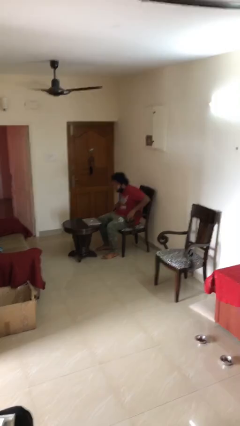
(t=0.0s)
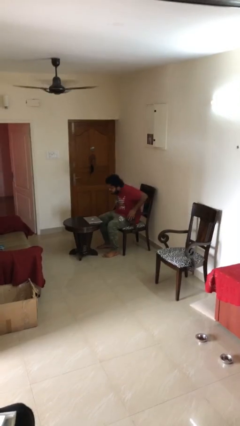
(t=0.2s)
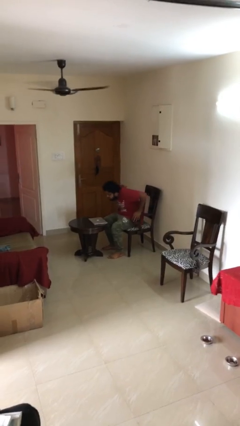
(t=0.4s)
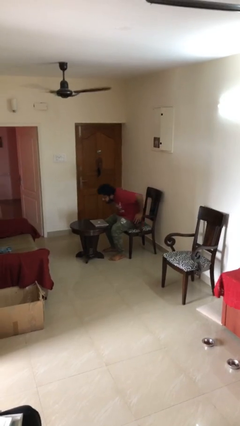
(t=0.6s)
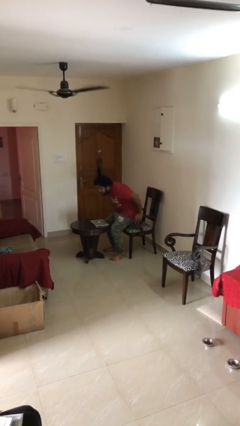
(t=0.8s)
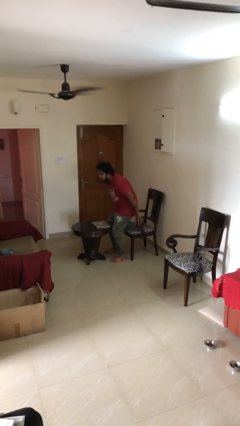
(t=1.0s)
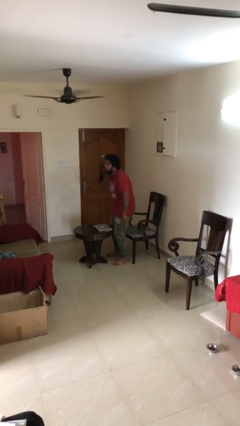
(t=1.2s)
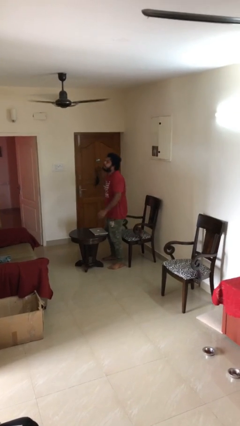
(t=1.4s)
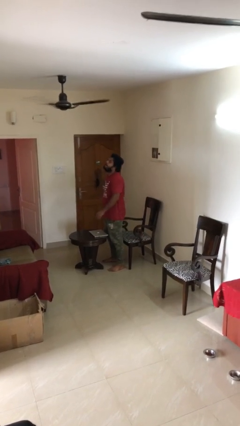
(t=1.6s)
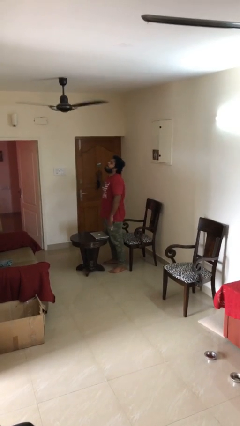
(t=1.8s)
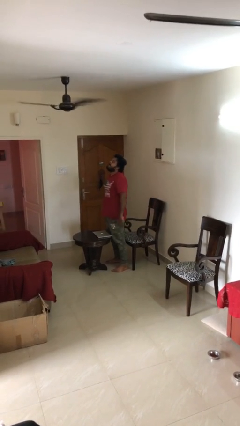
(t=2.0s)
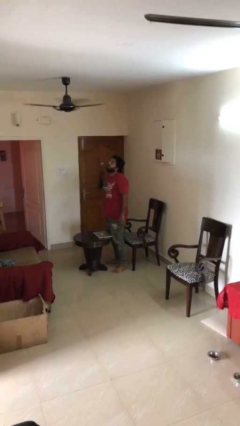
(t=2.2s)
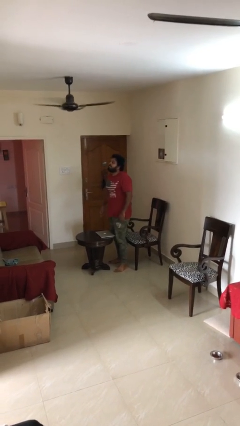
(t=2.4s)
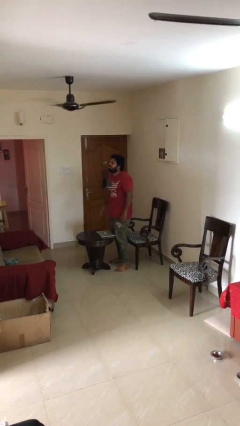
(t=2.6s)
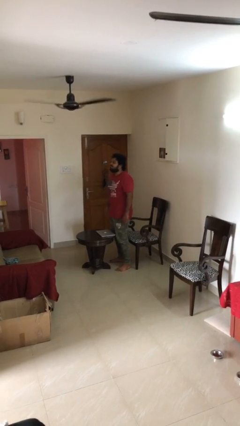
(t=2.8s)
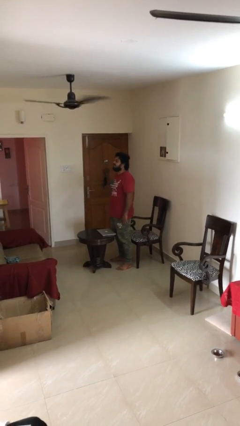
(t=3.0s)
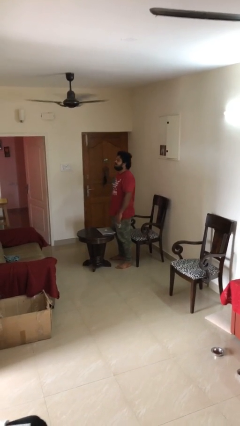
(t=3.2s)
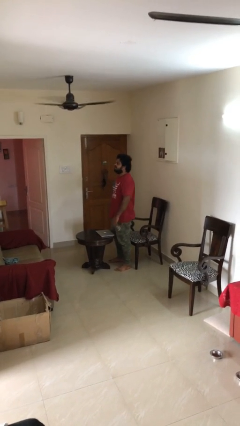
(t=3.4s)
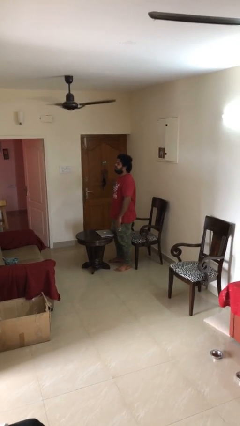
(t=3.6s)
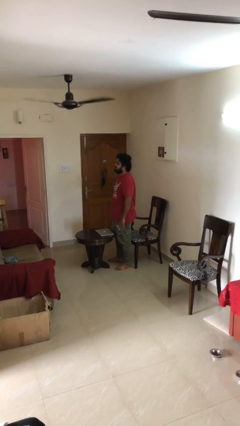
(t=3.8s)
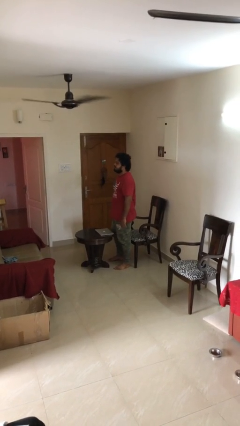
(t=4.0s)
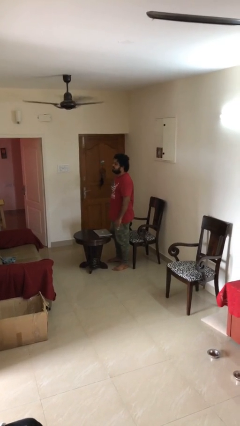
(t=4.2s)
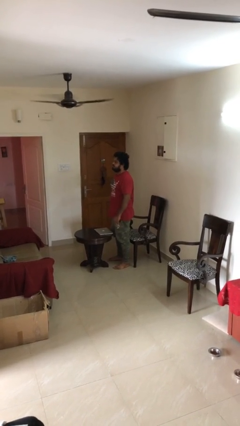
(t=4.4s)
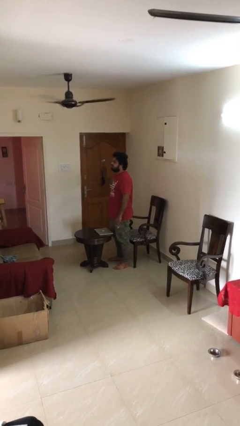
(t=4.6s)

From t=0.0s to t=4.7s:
person stands up

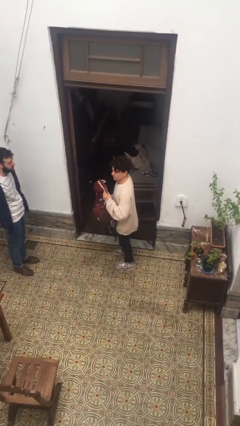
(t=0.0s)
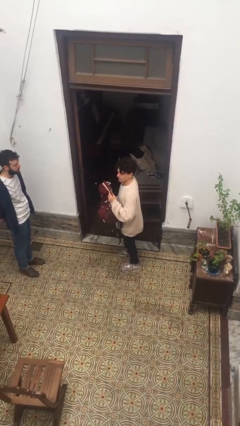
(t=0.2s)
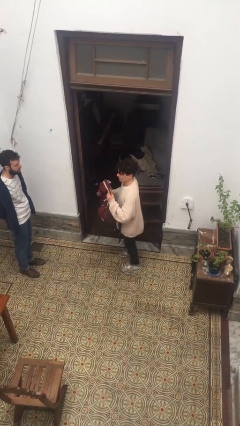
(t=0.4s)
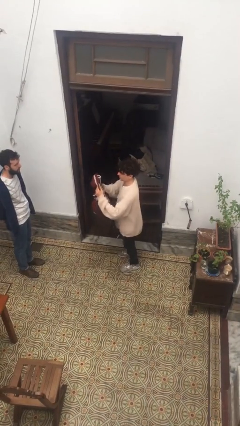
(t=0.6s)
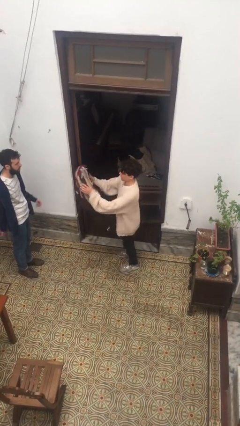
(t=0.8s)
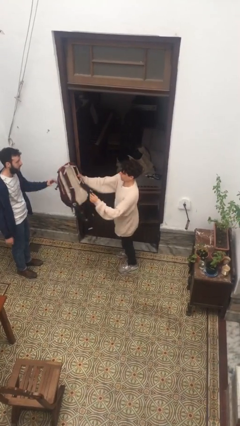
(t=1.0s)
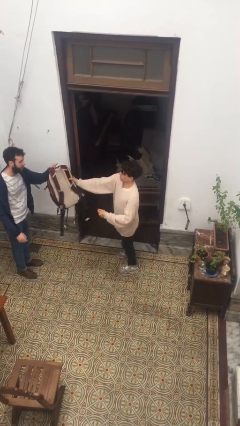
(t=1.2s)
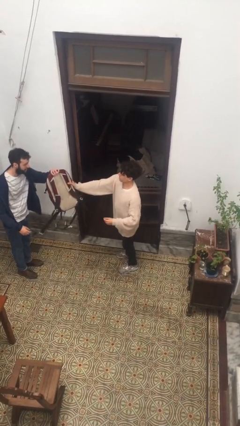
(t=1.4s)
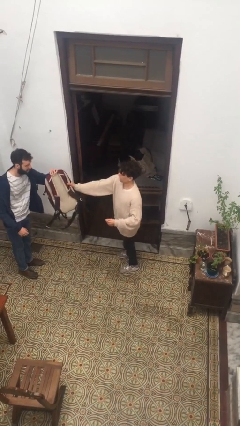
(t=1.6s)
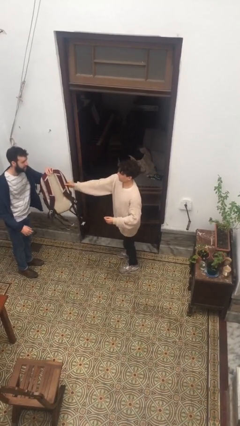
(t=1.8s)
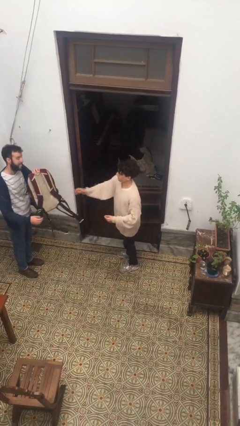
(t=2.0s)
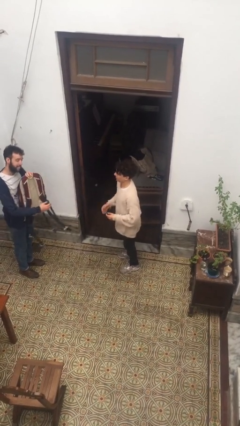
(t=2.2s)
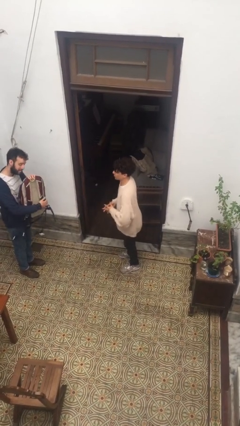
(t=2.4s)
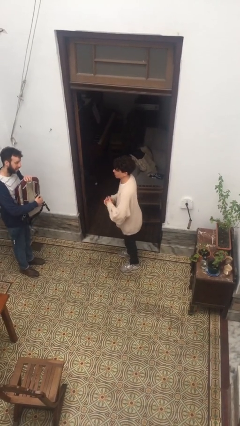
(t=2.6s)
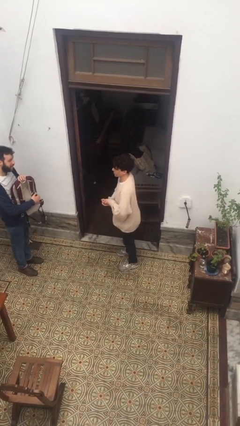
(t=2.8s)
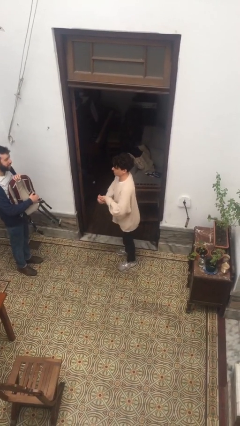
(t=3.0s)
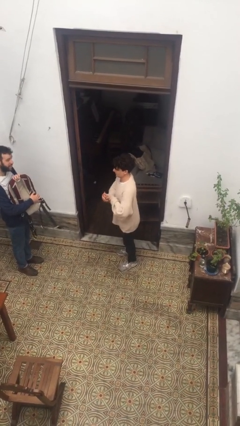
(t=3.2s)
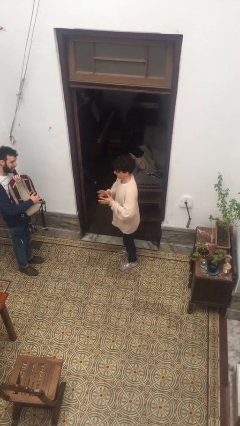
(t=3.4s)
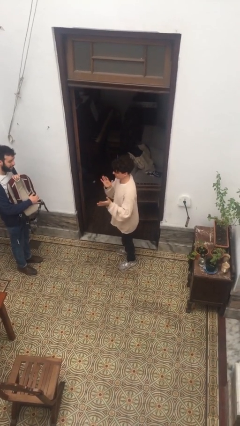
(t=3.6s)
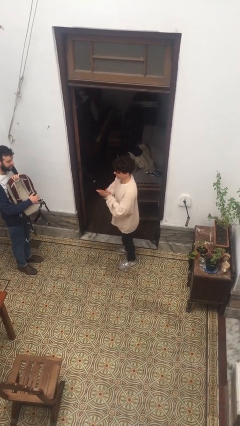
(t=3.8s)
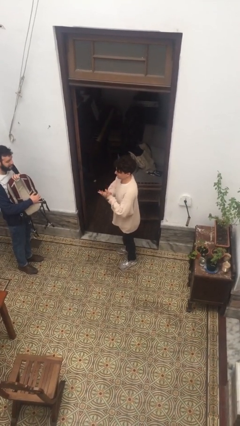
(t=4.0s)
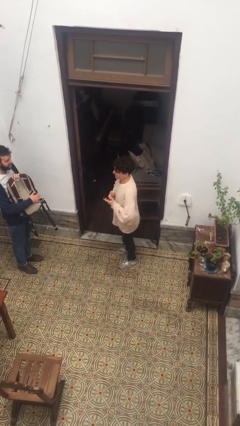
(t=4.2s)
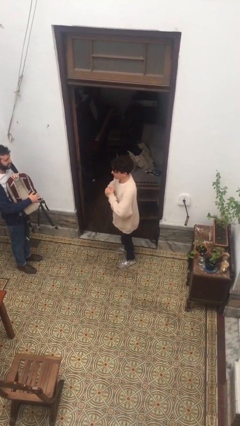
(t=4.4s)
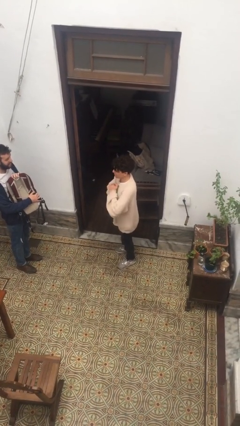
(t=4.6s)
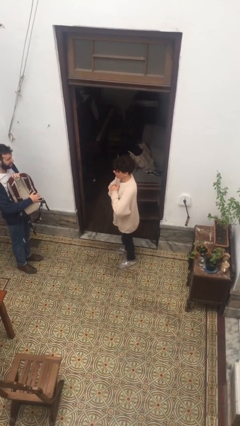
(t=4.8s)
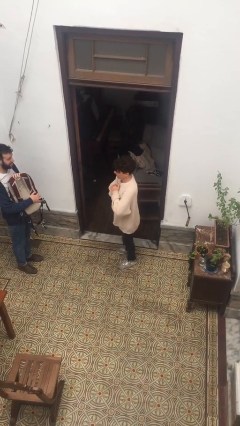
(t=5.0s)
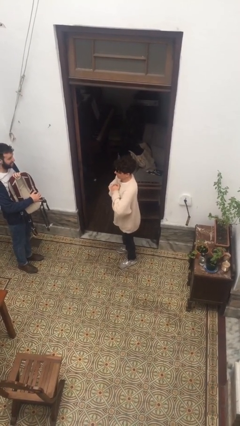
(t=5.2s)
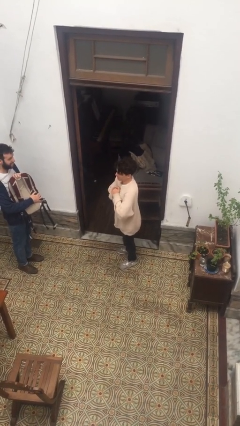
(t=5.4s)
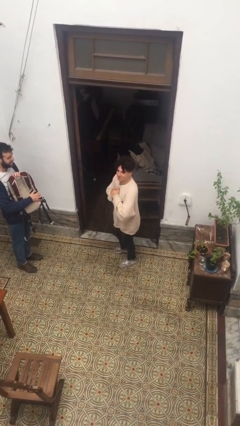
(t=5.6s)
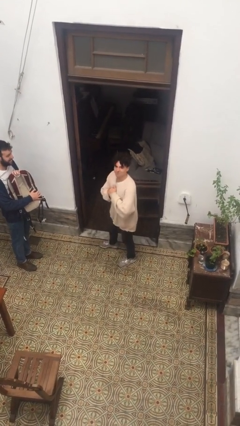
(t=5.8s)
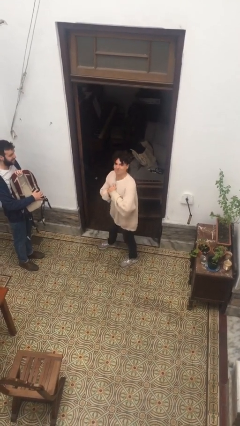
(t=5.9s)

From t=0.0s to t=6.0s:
person transfers object to person

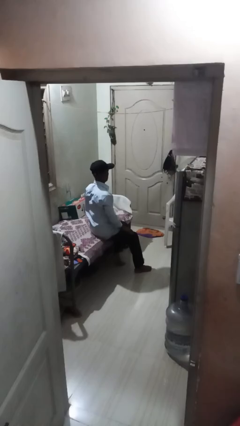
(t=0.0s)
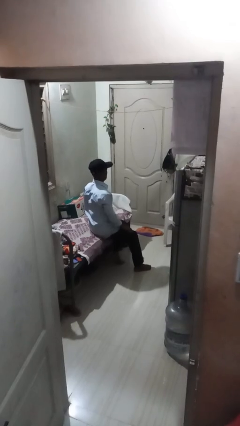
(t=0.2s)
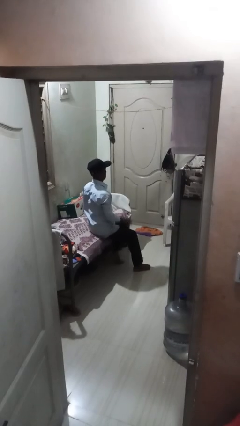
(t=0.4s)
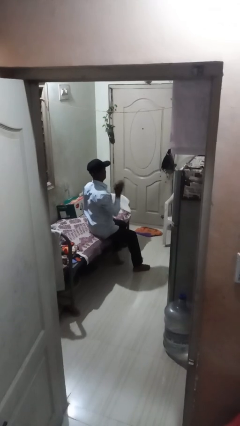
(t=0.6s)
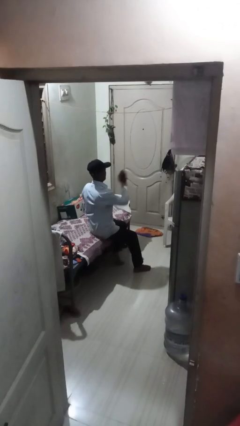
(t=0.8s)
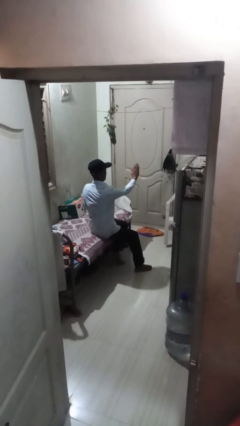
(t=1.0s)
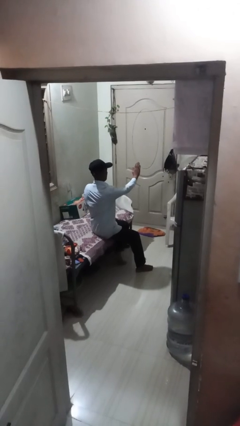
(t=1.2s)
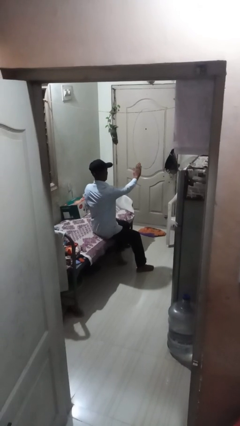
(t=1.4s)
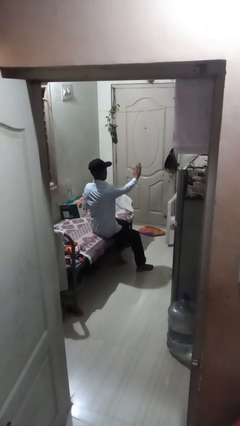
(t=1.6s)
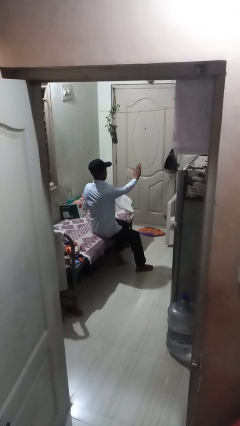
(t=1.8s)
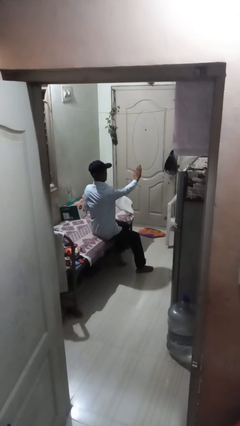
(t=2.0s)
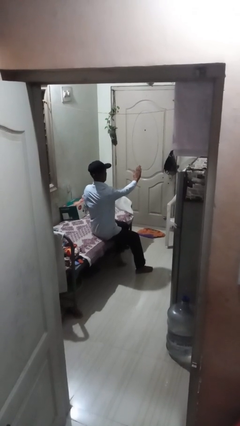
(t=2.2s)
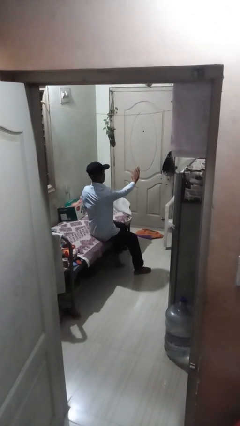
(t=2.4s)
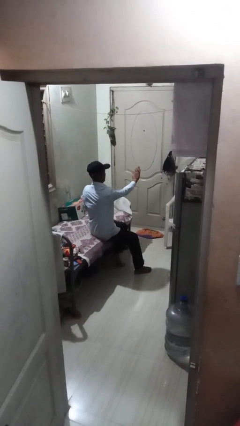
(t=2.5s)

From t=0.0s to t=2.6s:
person gestures stop

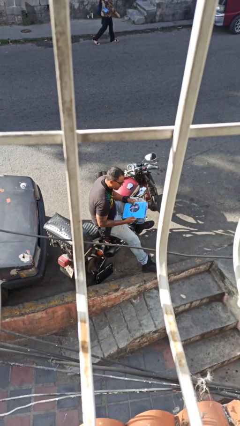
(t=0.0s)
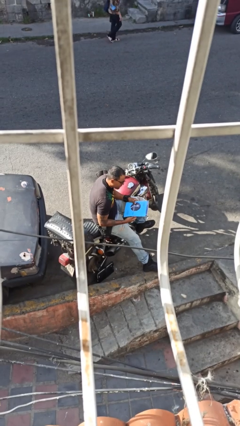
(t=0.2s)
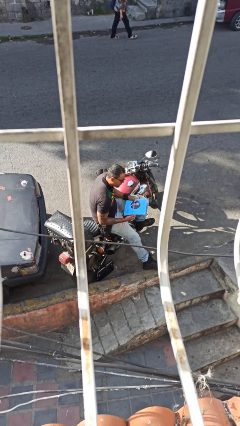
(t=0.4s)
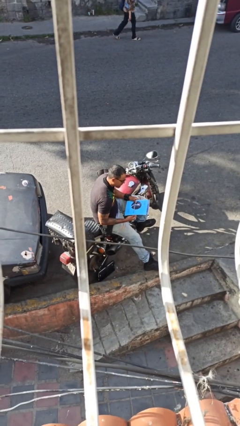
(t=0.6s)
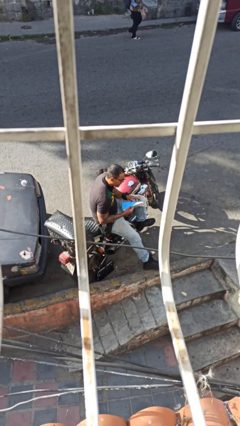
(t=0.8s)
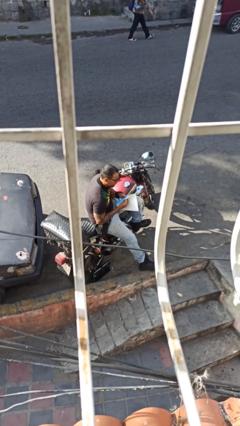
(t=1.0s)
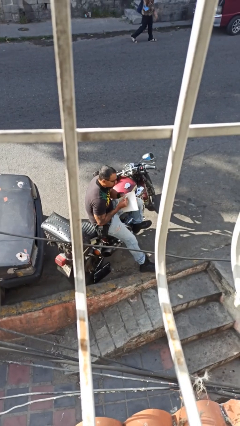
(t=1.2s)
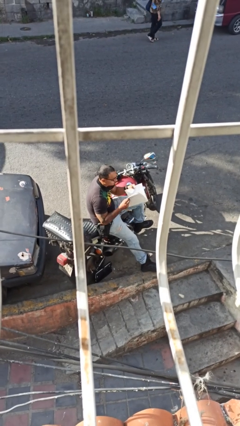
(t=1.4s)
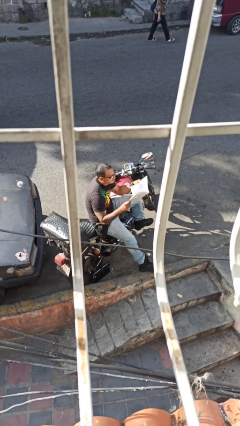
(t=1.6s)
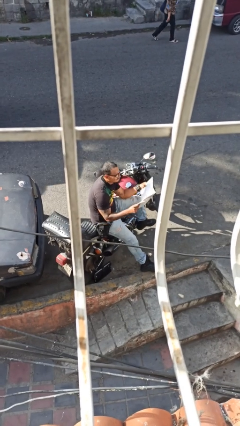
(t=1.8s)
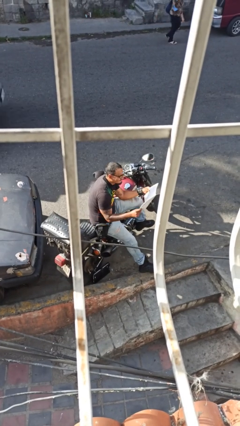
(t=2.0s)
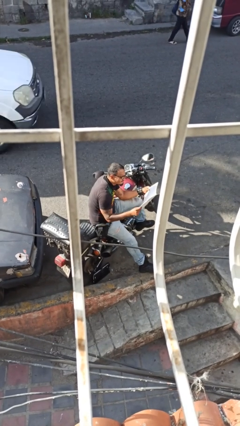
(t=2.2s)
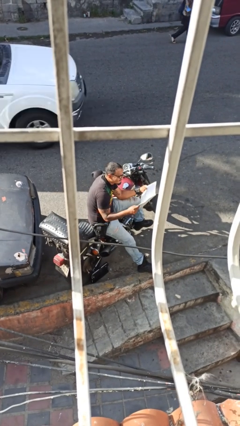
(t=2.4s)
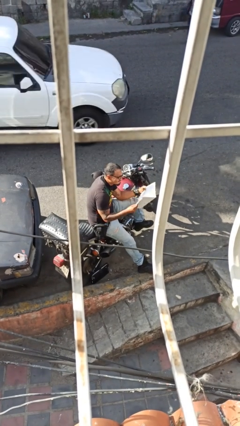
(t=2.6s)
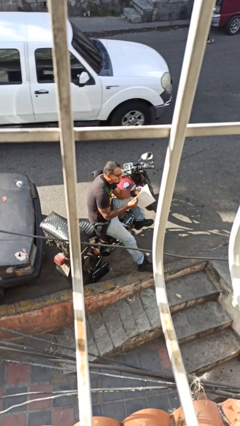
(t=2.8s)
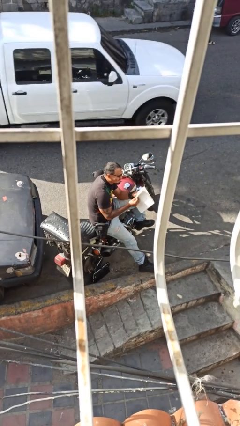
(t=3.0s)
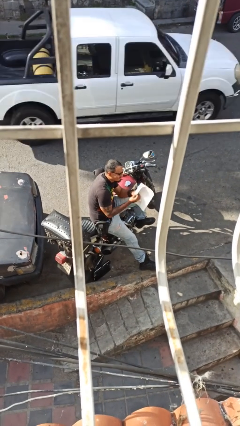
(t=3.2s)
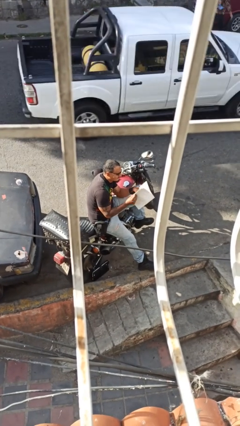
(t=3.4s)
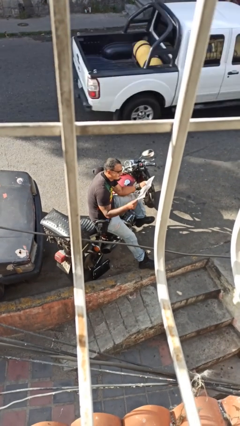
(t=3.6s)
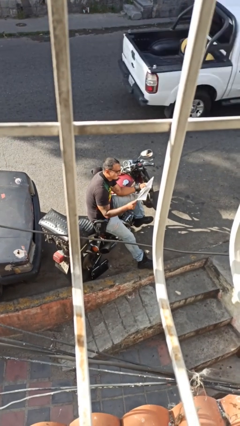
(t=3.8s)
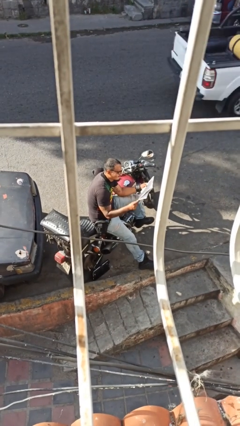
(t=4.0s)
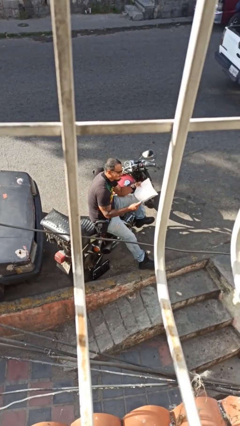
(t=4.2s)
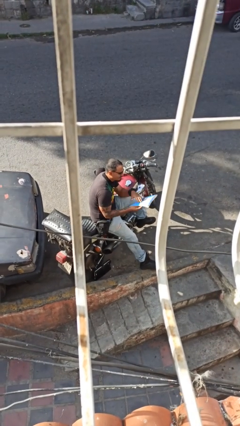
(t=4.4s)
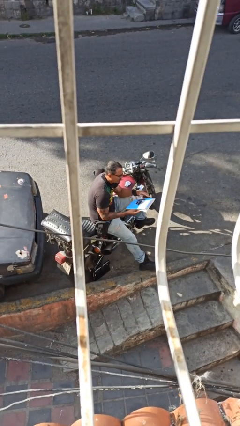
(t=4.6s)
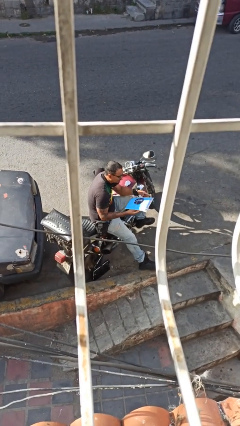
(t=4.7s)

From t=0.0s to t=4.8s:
person reads document
